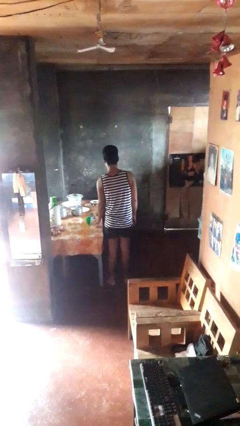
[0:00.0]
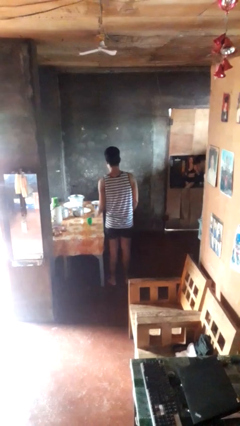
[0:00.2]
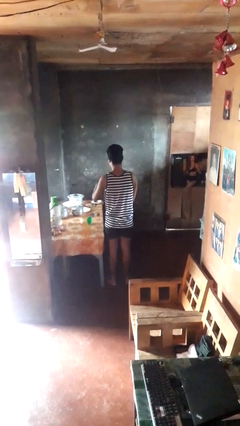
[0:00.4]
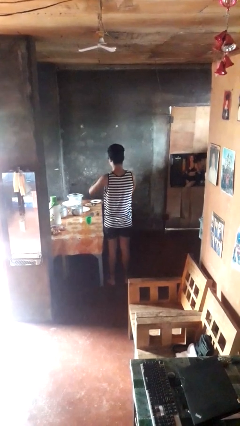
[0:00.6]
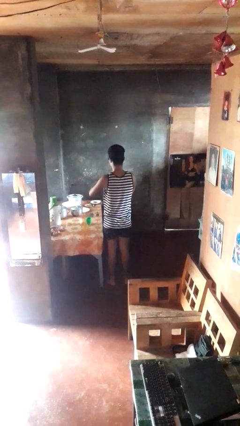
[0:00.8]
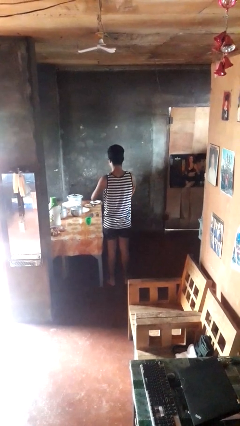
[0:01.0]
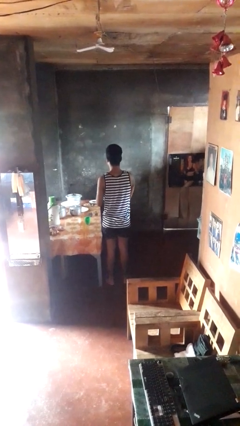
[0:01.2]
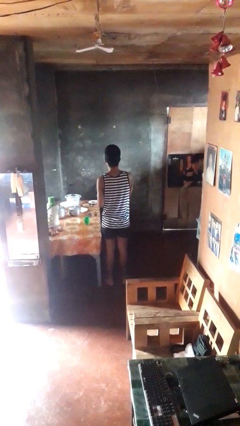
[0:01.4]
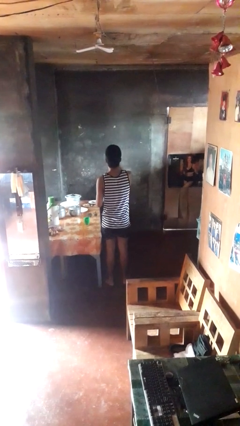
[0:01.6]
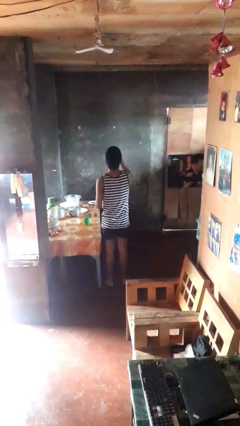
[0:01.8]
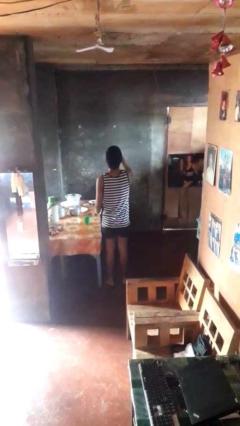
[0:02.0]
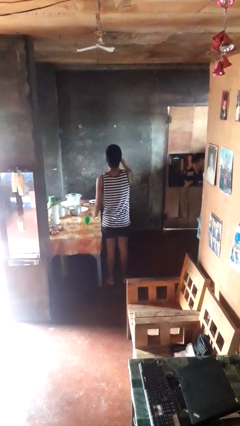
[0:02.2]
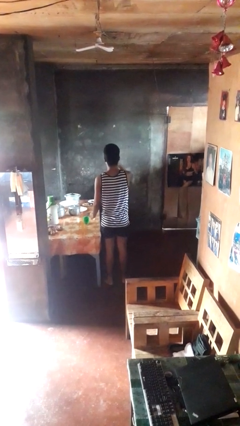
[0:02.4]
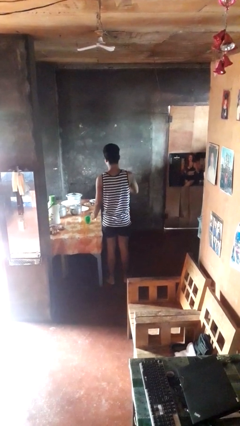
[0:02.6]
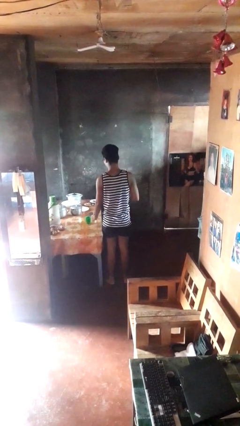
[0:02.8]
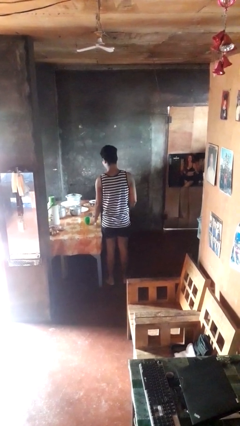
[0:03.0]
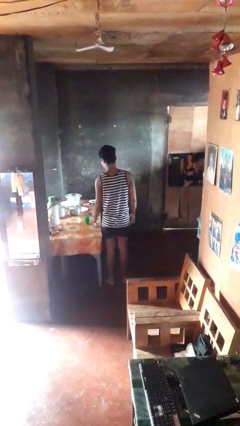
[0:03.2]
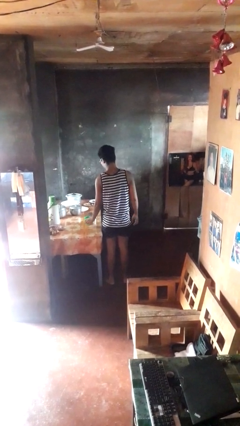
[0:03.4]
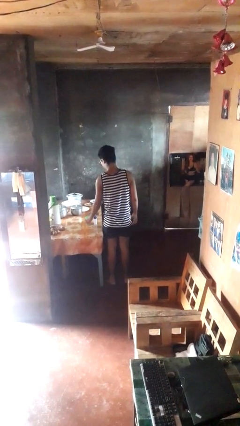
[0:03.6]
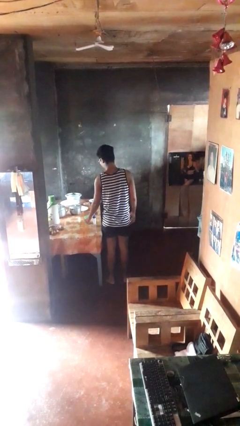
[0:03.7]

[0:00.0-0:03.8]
person takes medicine pills

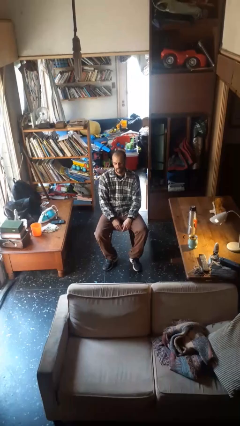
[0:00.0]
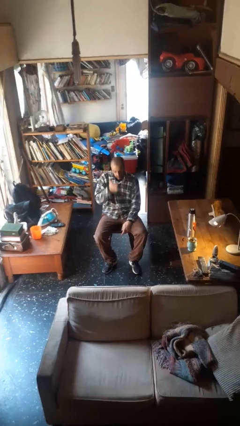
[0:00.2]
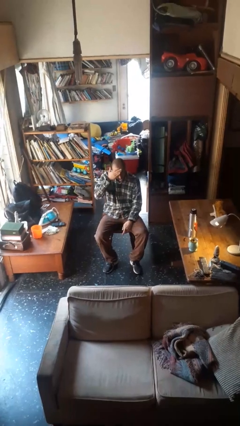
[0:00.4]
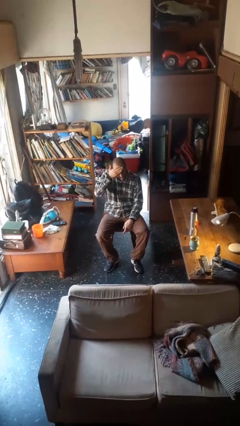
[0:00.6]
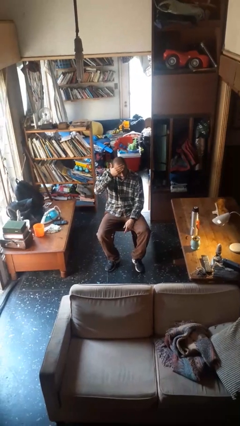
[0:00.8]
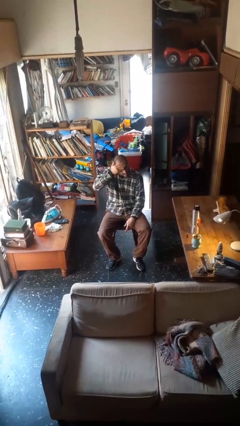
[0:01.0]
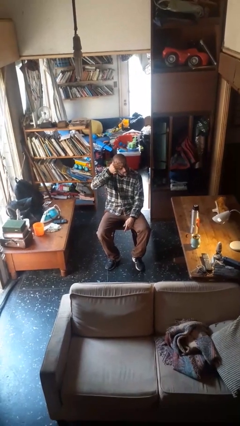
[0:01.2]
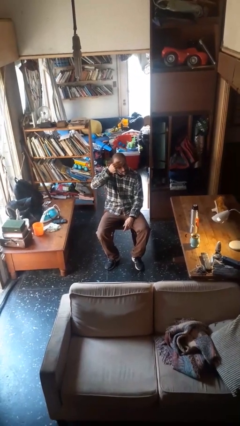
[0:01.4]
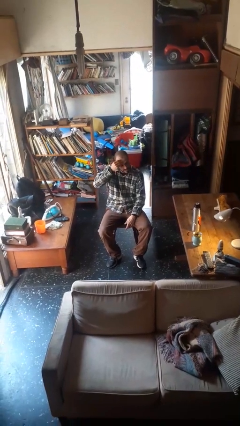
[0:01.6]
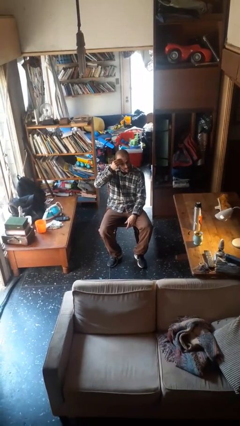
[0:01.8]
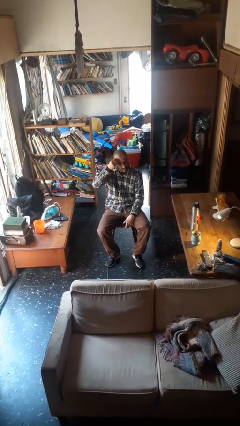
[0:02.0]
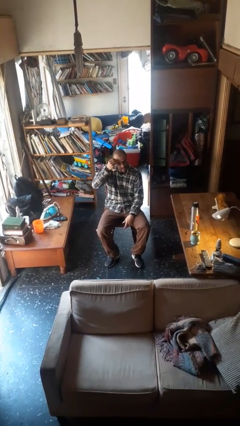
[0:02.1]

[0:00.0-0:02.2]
person swats bug

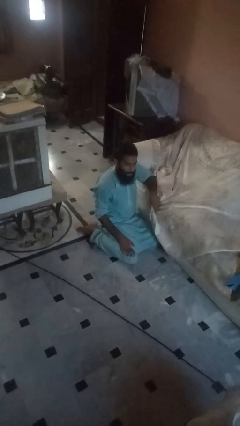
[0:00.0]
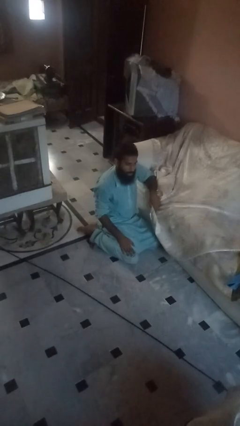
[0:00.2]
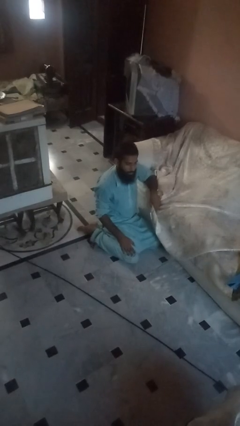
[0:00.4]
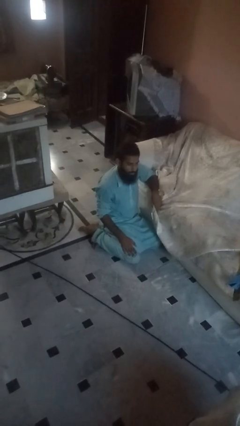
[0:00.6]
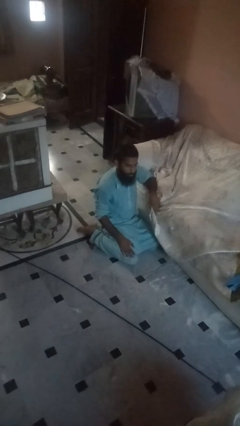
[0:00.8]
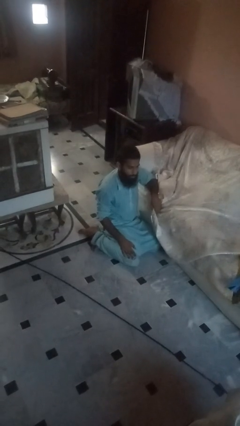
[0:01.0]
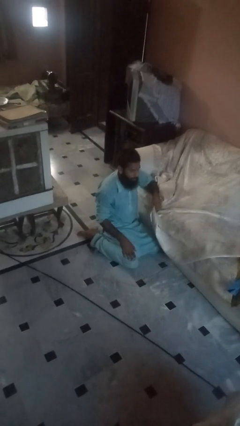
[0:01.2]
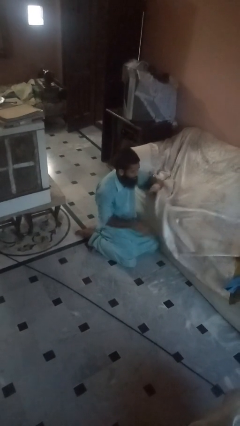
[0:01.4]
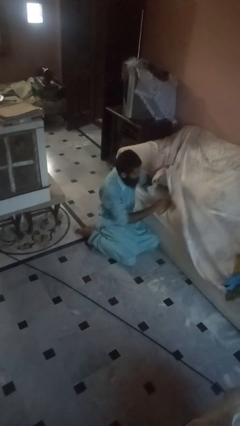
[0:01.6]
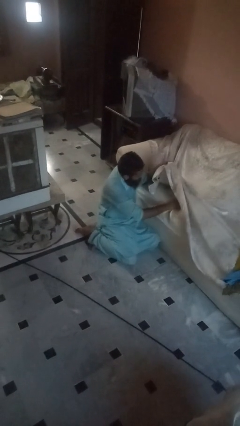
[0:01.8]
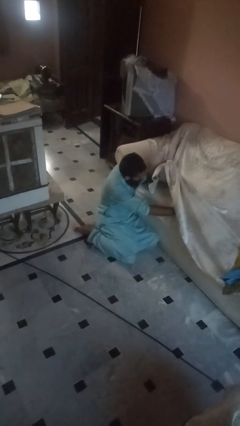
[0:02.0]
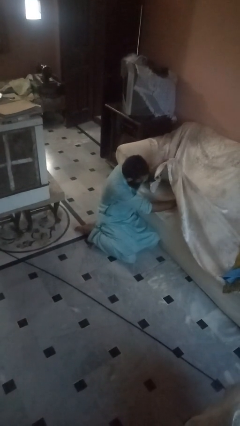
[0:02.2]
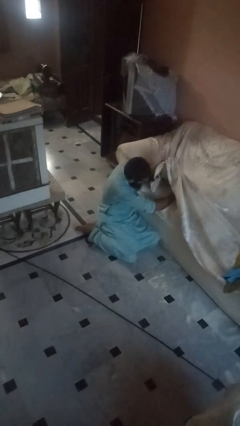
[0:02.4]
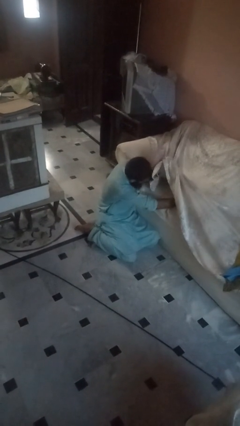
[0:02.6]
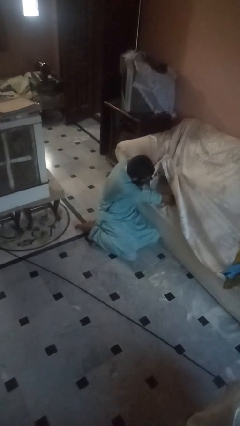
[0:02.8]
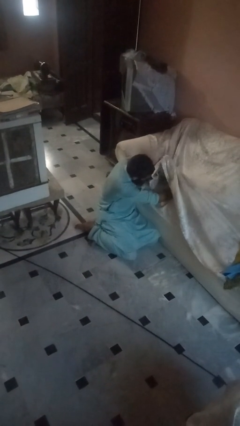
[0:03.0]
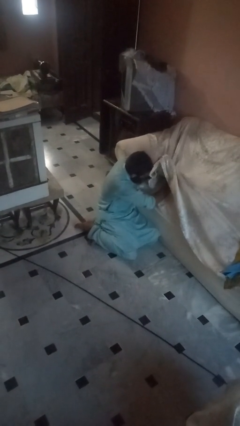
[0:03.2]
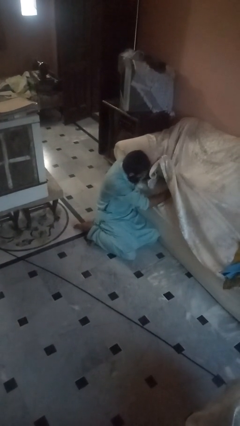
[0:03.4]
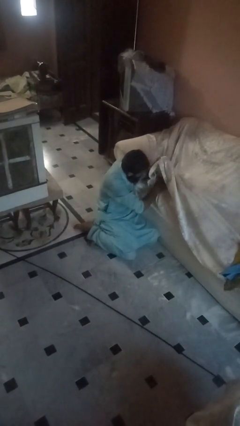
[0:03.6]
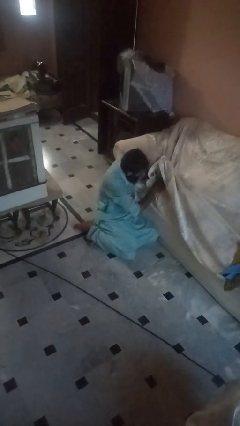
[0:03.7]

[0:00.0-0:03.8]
person searches under couch

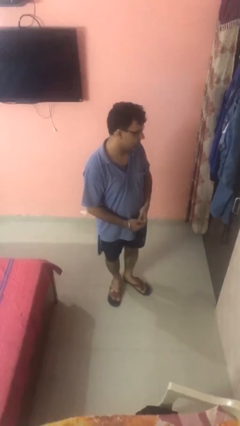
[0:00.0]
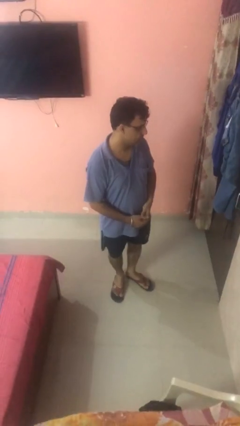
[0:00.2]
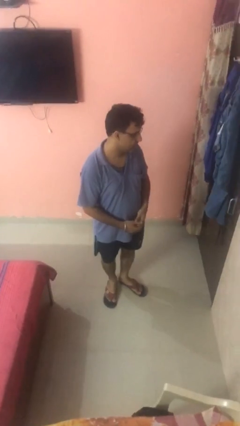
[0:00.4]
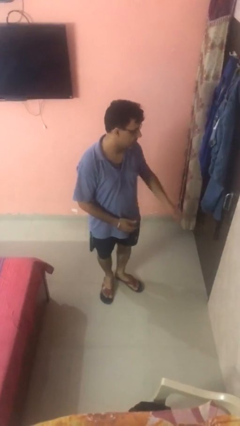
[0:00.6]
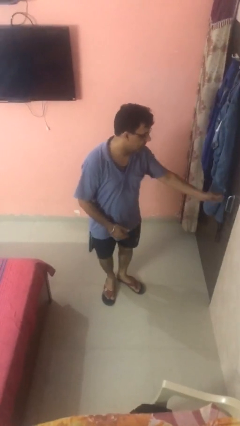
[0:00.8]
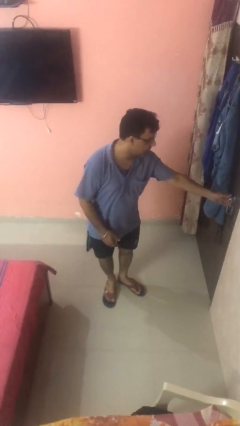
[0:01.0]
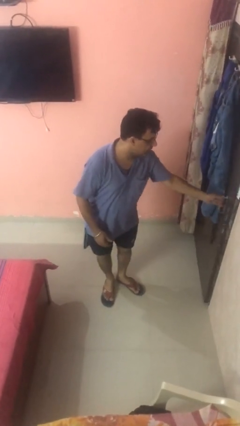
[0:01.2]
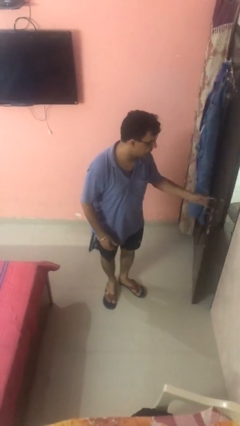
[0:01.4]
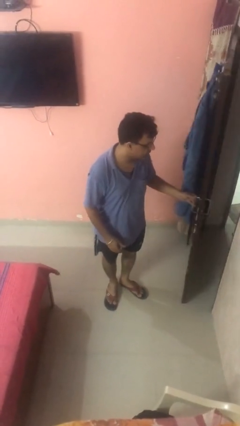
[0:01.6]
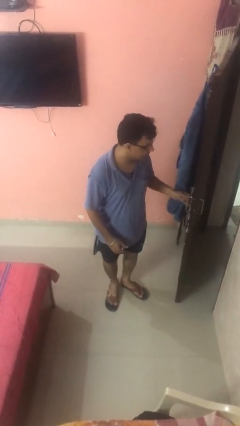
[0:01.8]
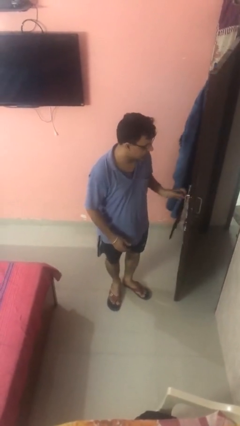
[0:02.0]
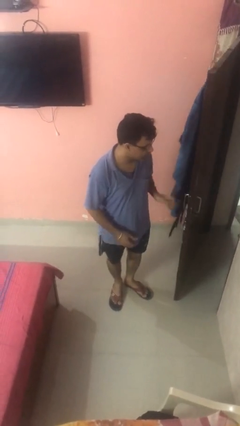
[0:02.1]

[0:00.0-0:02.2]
person opens facility door

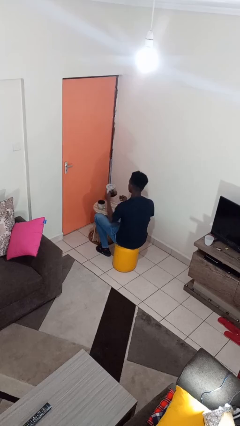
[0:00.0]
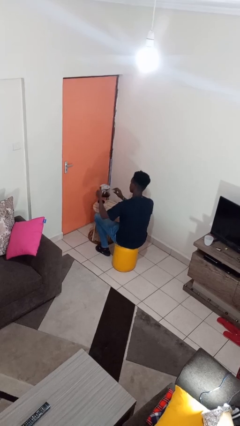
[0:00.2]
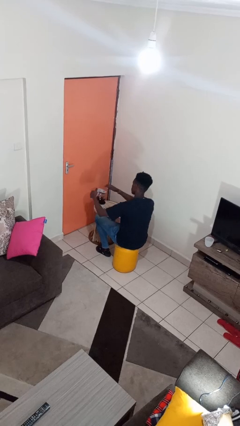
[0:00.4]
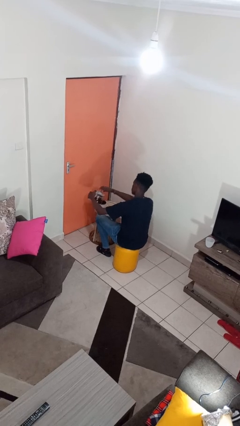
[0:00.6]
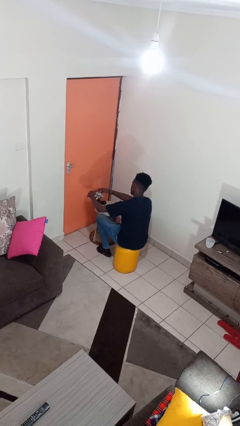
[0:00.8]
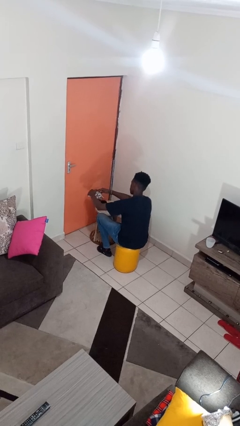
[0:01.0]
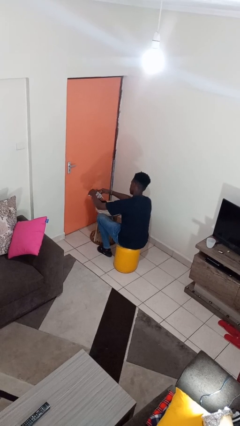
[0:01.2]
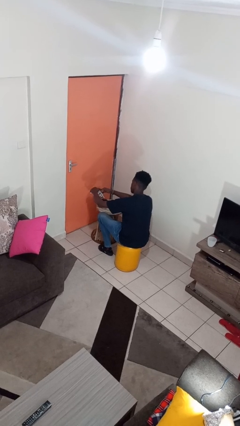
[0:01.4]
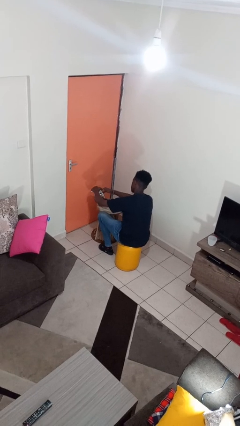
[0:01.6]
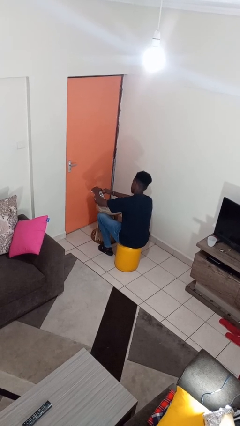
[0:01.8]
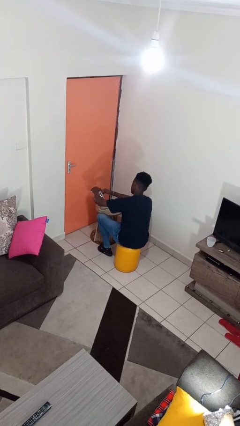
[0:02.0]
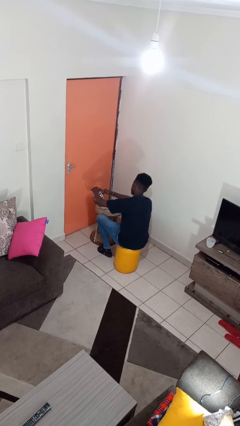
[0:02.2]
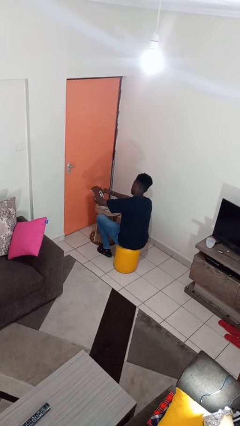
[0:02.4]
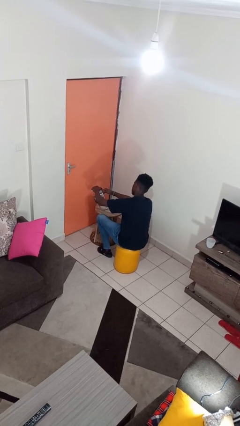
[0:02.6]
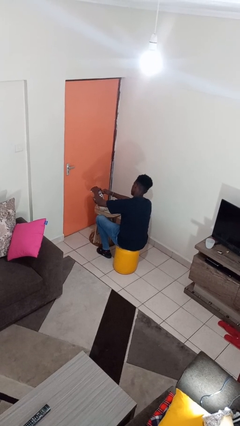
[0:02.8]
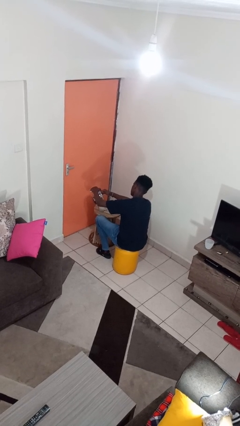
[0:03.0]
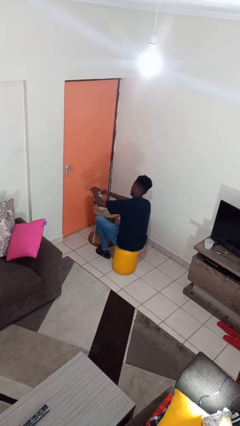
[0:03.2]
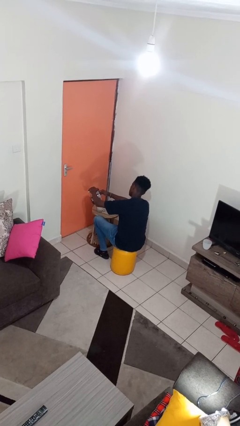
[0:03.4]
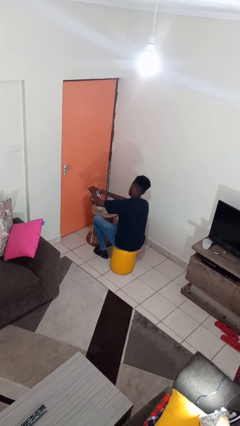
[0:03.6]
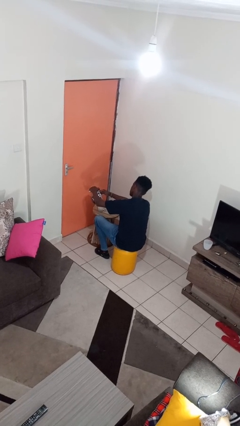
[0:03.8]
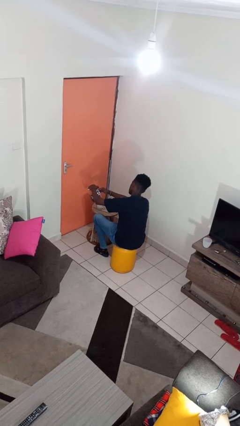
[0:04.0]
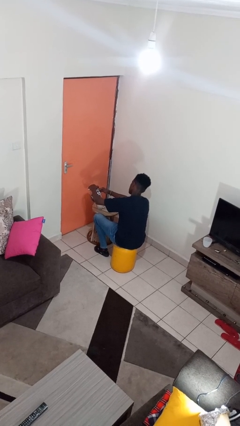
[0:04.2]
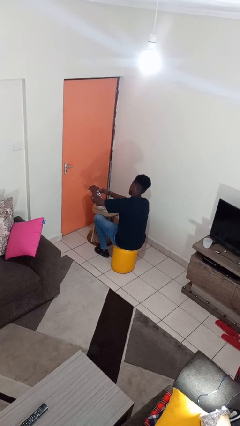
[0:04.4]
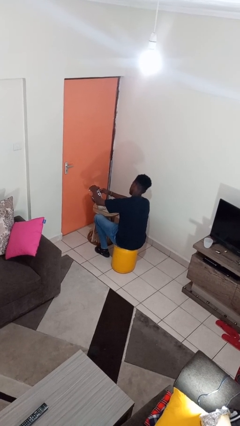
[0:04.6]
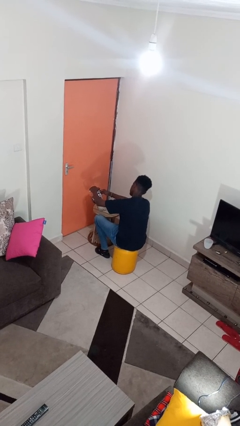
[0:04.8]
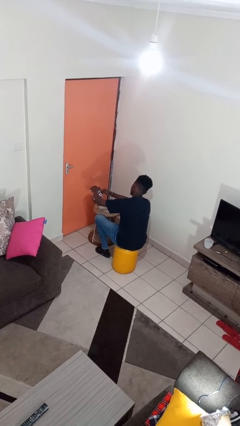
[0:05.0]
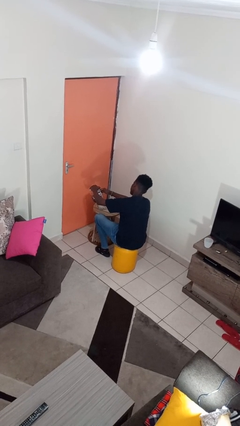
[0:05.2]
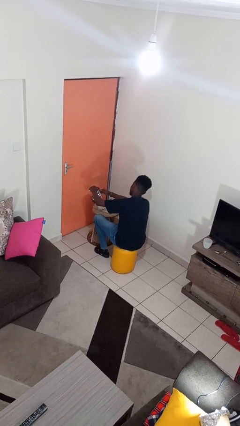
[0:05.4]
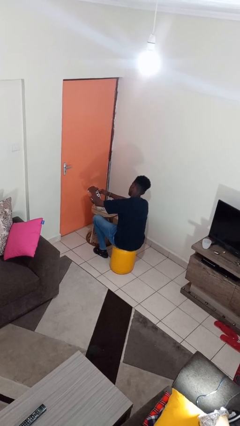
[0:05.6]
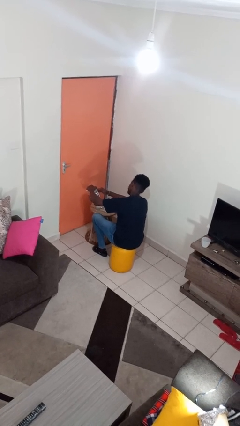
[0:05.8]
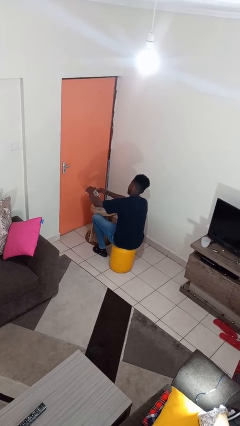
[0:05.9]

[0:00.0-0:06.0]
person pours coffee into mug
